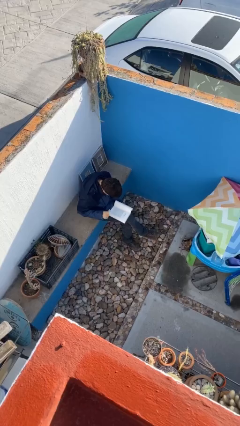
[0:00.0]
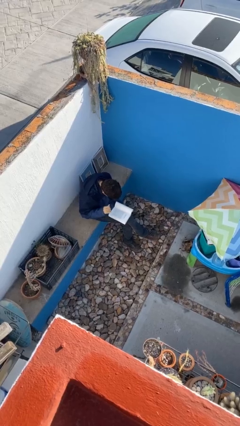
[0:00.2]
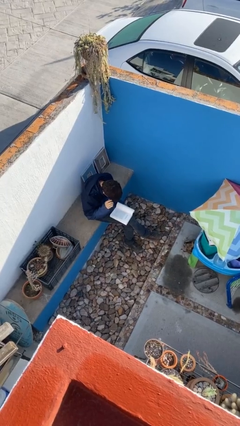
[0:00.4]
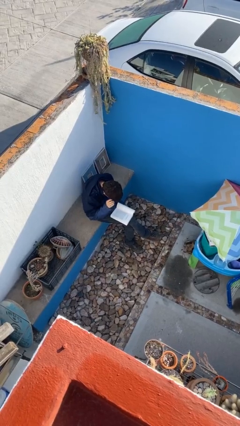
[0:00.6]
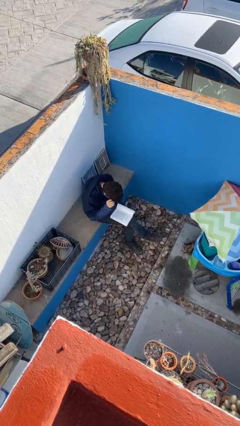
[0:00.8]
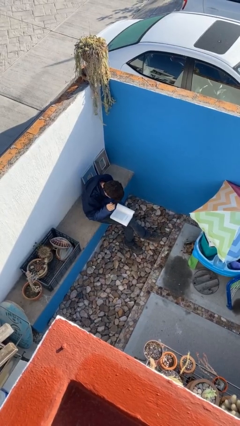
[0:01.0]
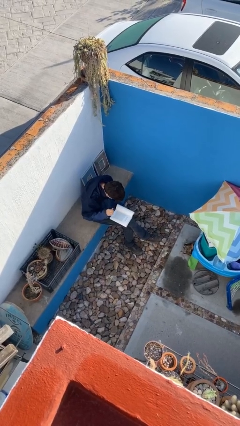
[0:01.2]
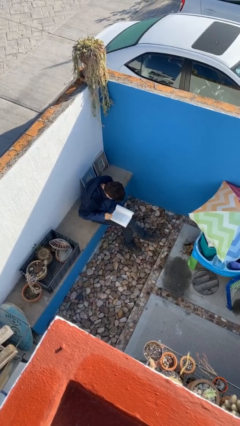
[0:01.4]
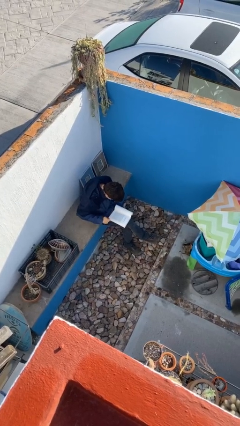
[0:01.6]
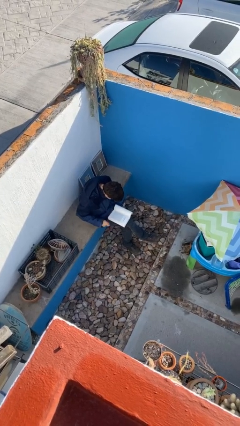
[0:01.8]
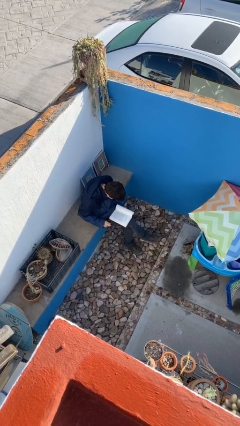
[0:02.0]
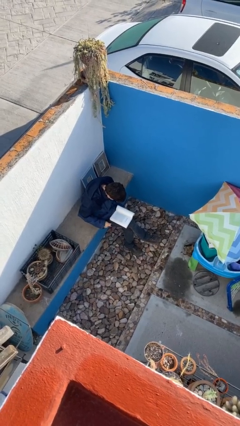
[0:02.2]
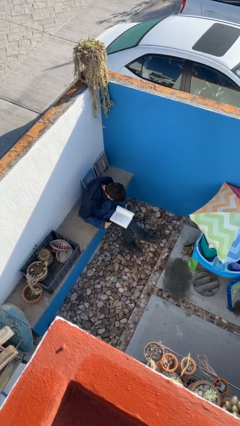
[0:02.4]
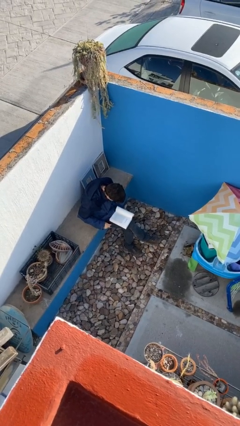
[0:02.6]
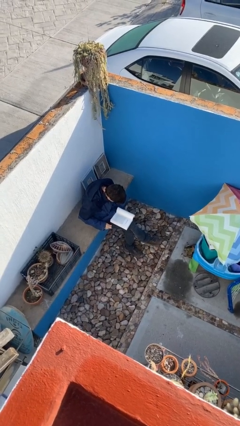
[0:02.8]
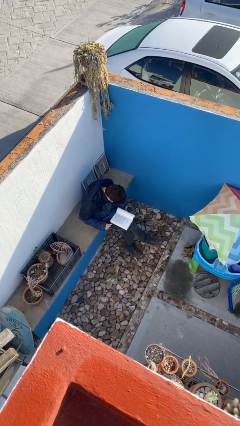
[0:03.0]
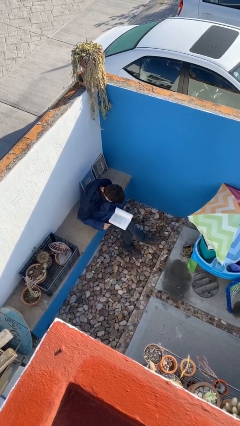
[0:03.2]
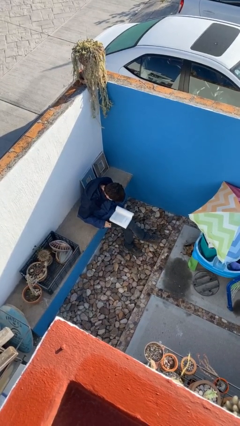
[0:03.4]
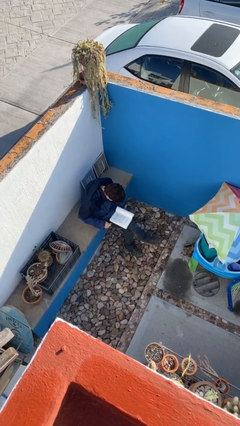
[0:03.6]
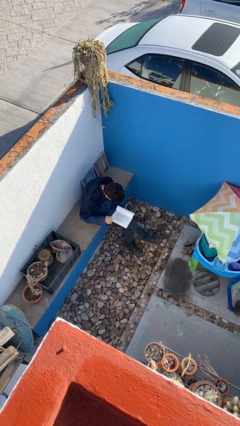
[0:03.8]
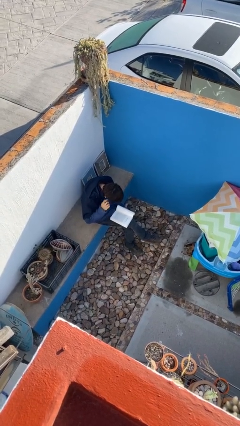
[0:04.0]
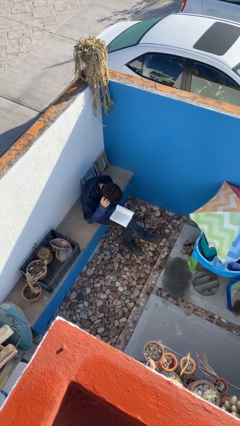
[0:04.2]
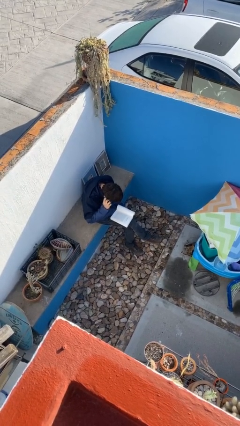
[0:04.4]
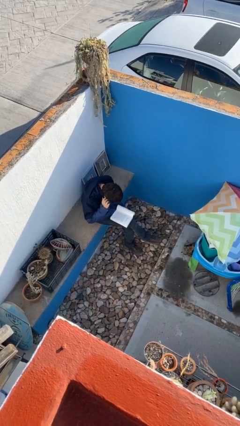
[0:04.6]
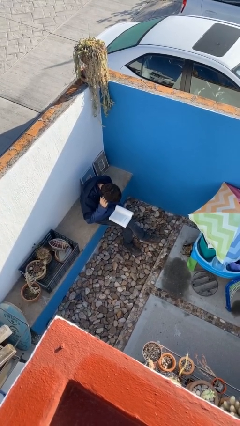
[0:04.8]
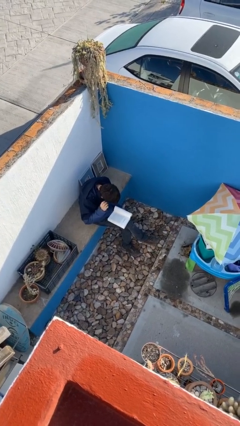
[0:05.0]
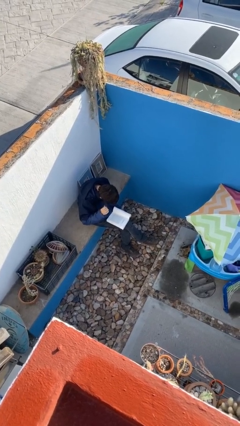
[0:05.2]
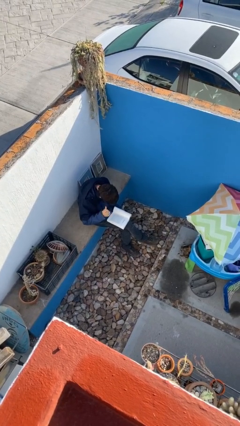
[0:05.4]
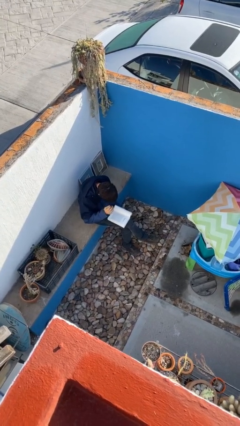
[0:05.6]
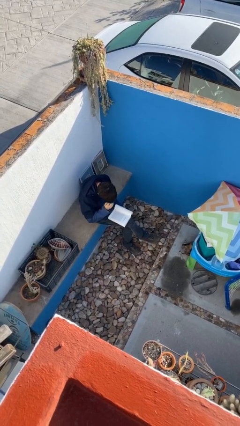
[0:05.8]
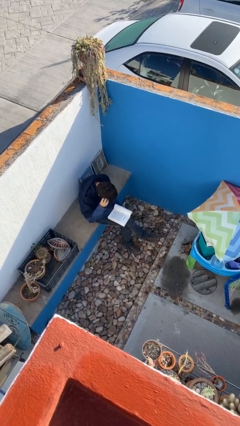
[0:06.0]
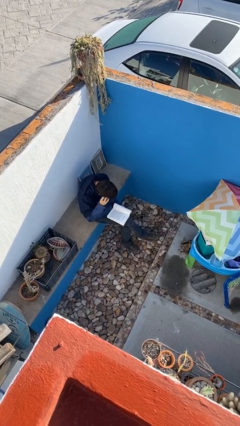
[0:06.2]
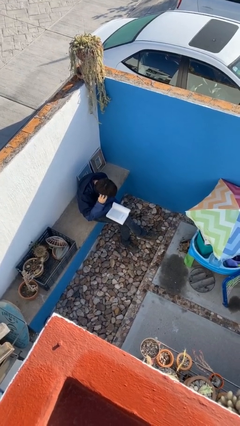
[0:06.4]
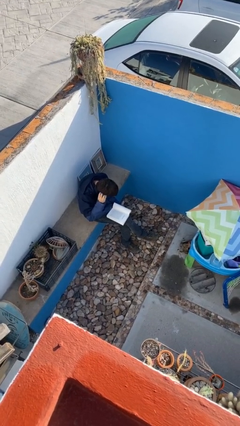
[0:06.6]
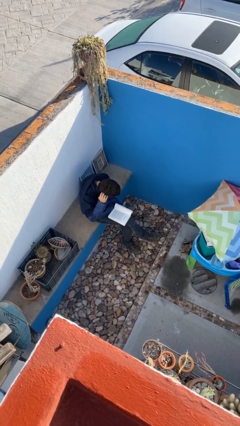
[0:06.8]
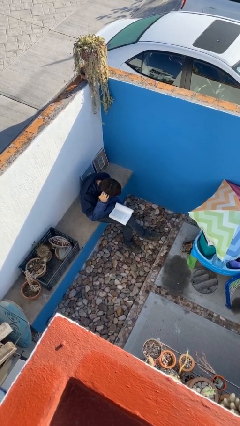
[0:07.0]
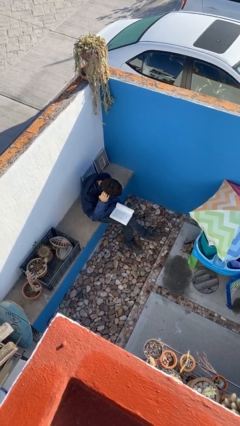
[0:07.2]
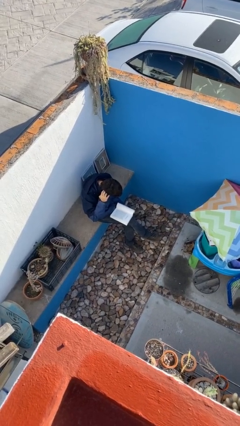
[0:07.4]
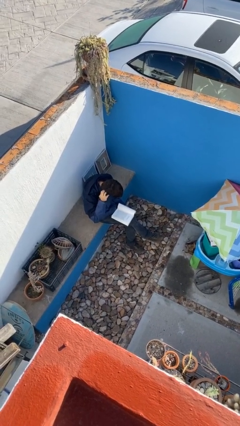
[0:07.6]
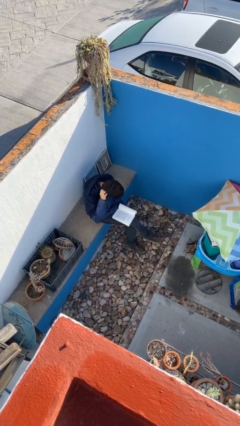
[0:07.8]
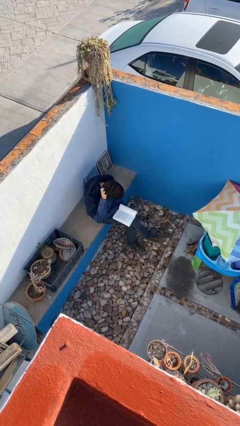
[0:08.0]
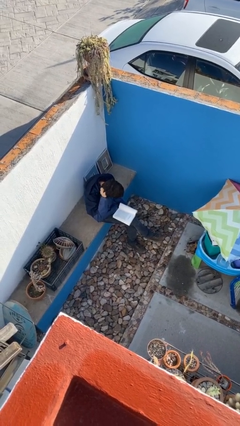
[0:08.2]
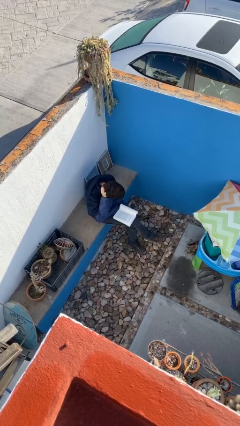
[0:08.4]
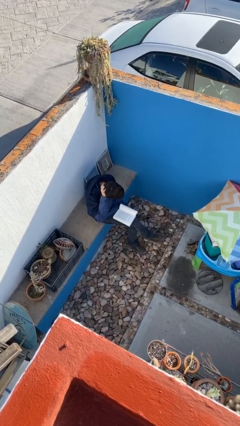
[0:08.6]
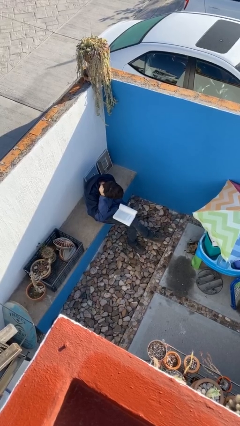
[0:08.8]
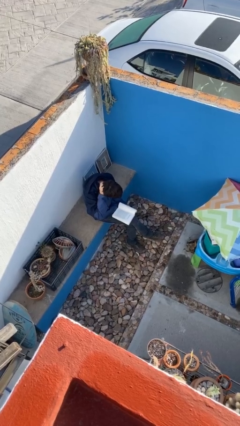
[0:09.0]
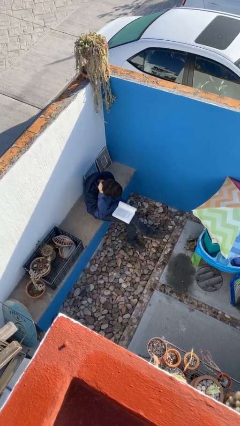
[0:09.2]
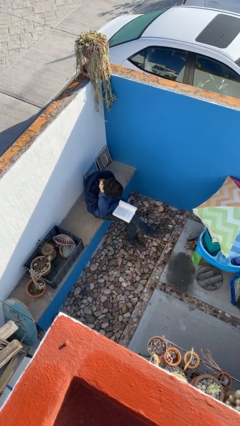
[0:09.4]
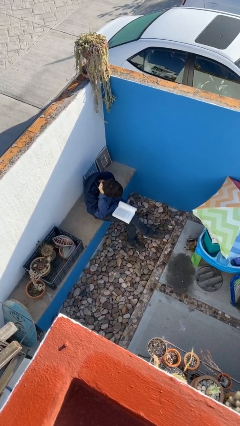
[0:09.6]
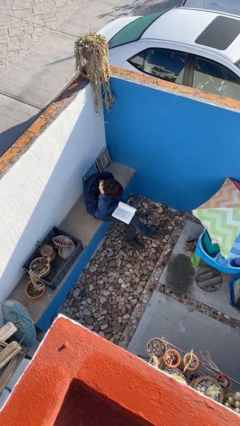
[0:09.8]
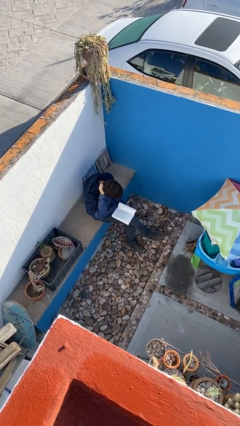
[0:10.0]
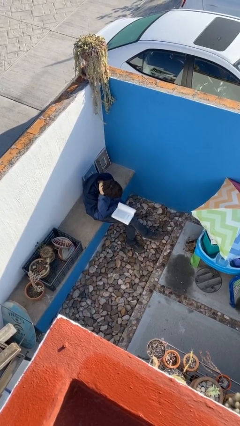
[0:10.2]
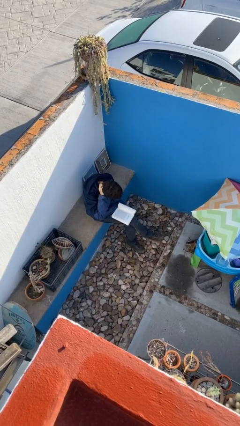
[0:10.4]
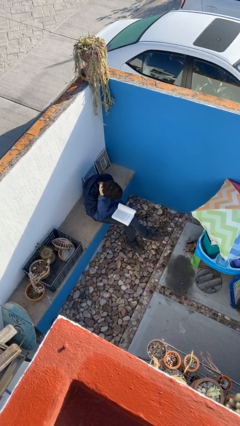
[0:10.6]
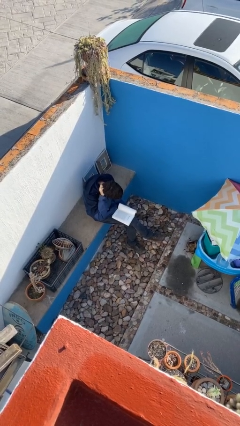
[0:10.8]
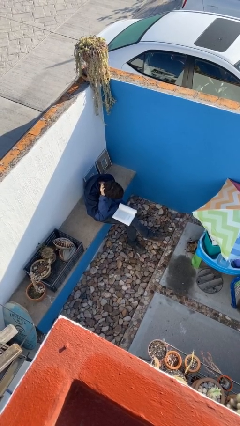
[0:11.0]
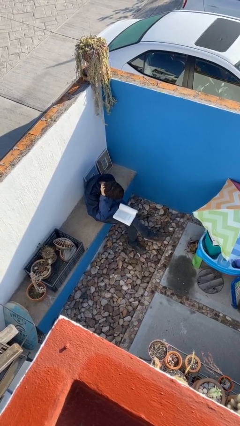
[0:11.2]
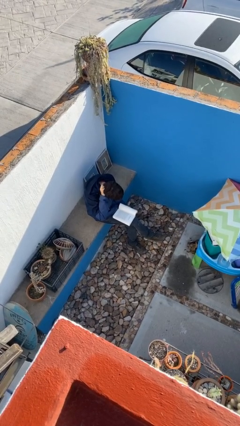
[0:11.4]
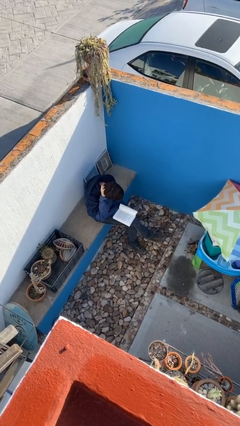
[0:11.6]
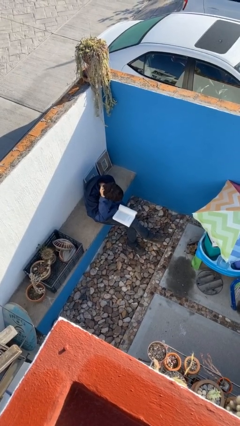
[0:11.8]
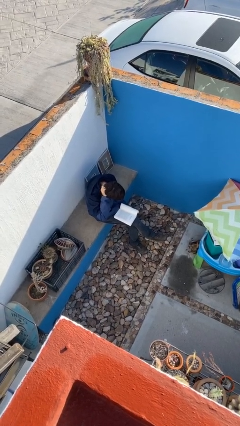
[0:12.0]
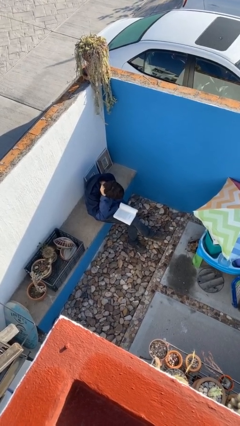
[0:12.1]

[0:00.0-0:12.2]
person reads document

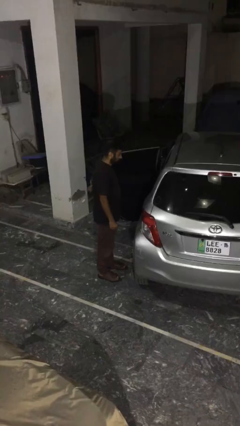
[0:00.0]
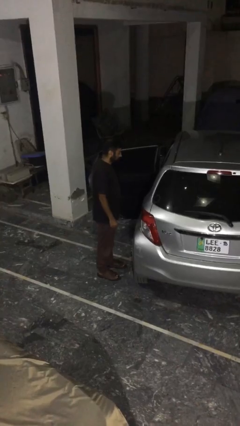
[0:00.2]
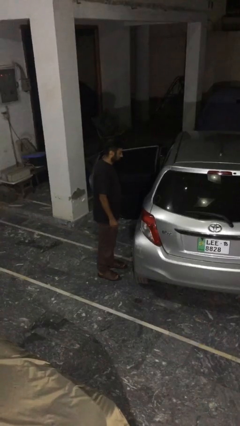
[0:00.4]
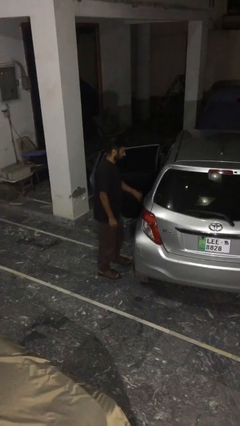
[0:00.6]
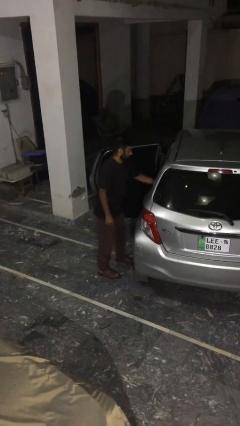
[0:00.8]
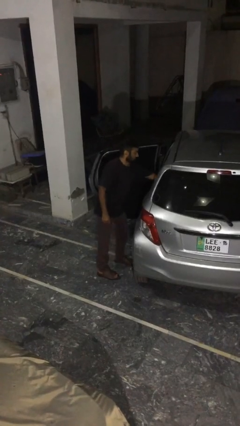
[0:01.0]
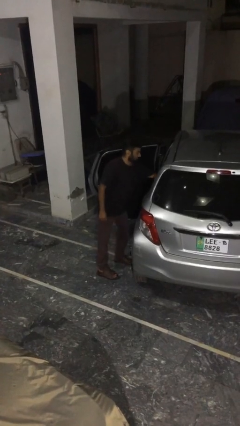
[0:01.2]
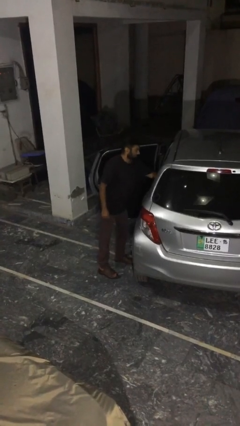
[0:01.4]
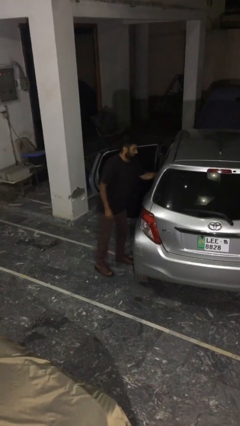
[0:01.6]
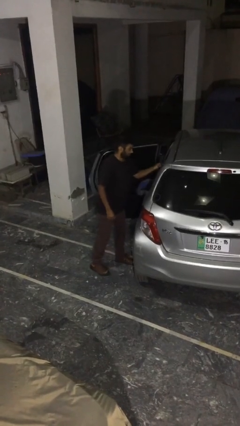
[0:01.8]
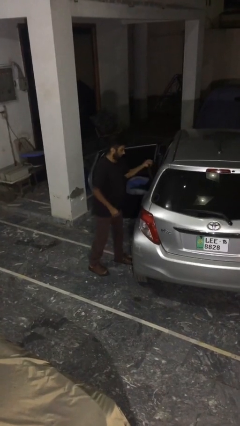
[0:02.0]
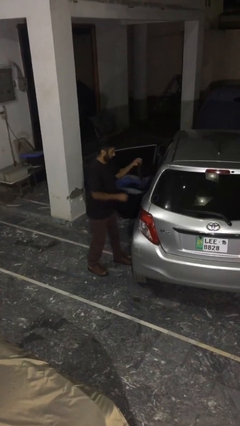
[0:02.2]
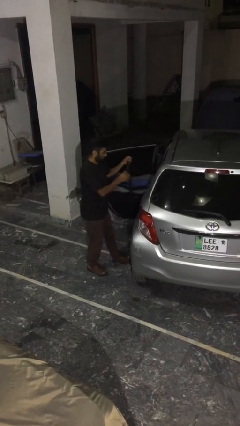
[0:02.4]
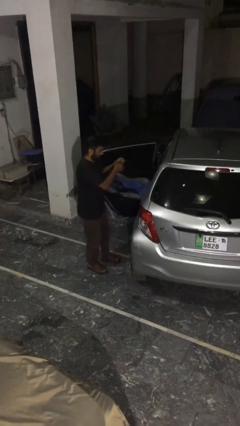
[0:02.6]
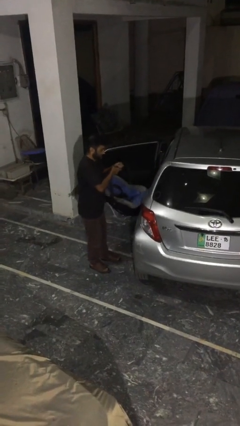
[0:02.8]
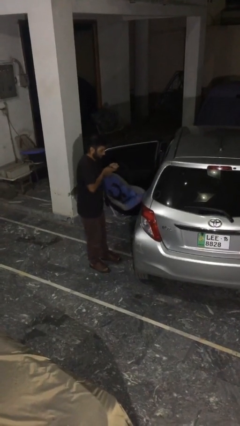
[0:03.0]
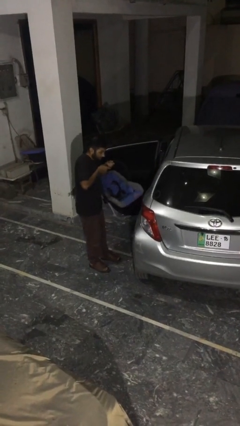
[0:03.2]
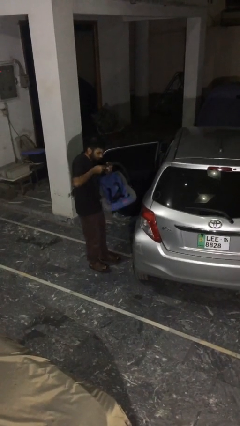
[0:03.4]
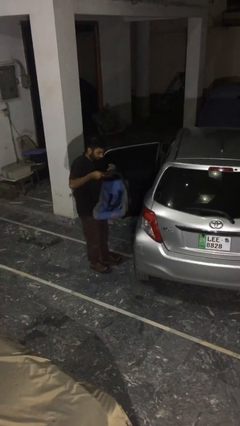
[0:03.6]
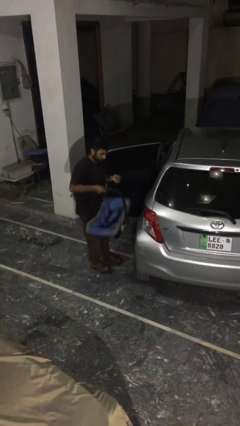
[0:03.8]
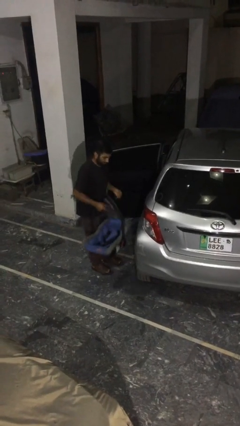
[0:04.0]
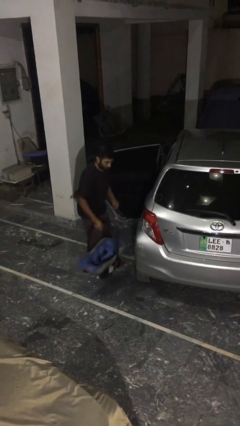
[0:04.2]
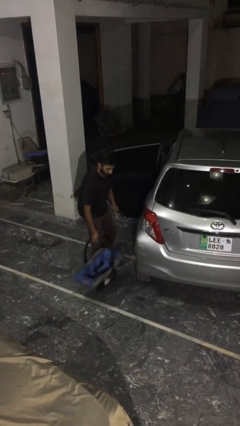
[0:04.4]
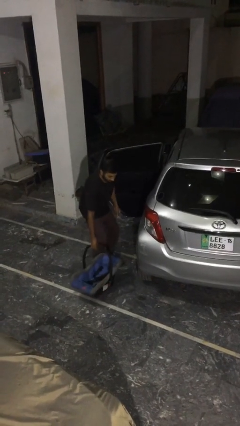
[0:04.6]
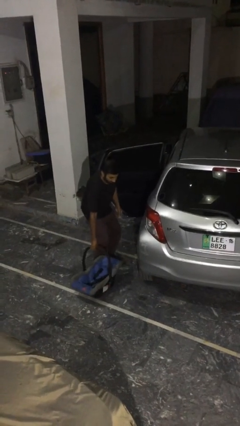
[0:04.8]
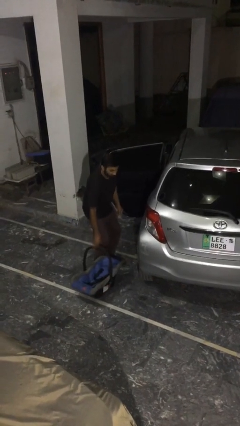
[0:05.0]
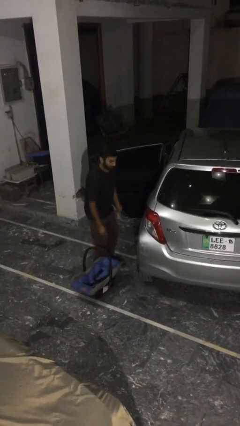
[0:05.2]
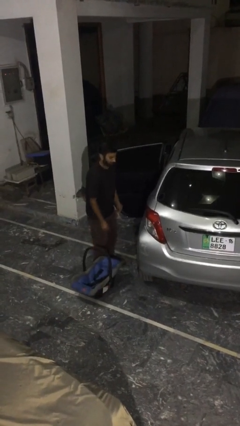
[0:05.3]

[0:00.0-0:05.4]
person unloads car

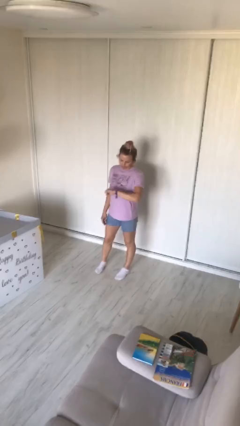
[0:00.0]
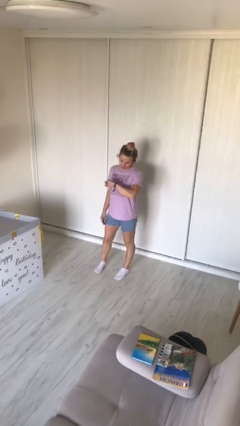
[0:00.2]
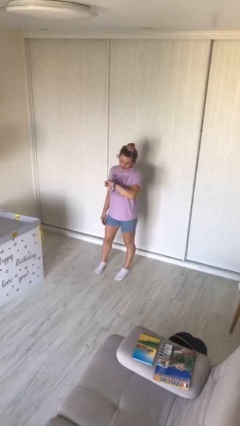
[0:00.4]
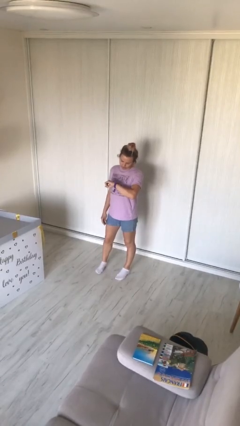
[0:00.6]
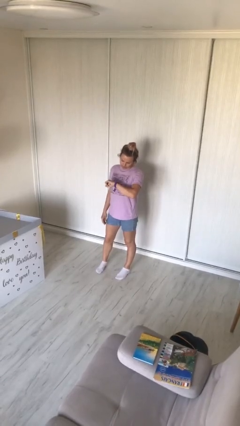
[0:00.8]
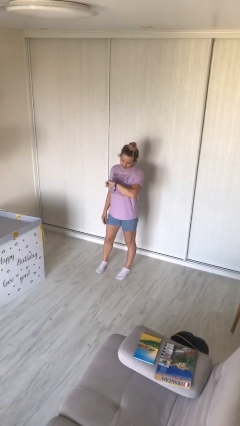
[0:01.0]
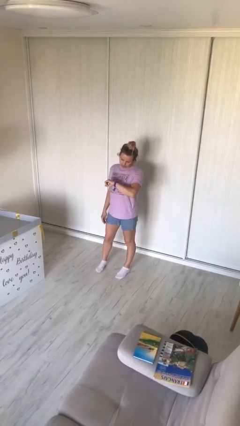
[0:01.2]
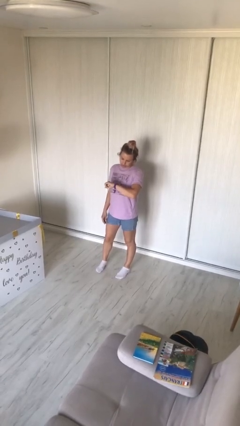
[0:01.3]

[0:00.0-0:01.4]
person looks at wristwatch
